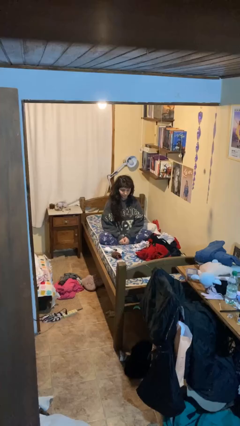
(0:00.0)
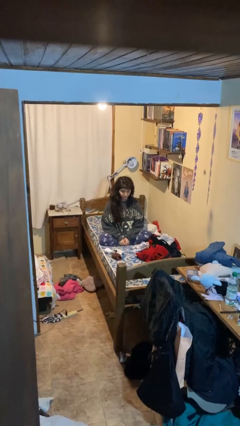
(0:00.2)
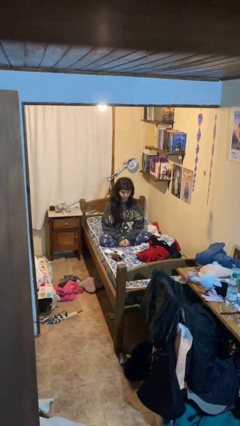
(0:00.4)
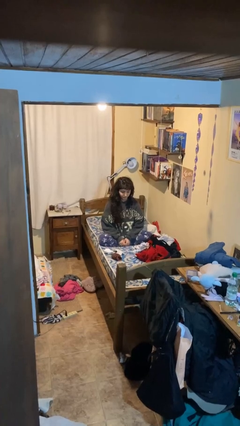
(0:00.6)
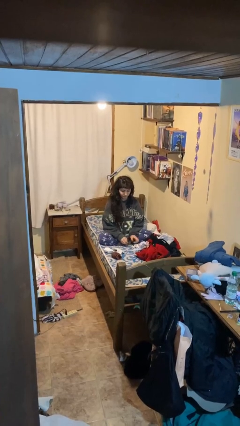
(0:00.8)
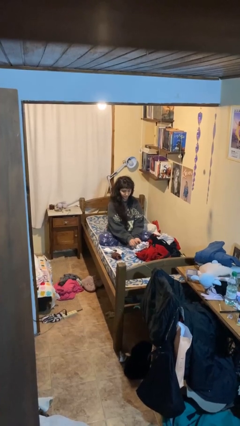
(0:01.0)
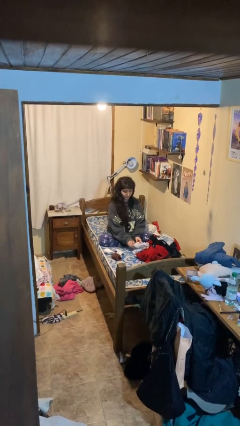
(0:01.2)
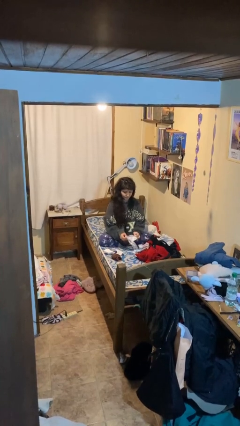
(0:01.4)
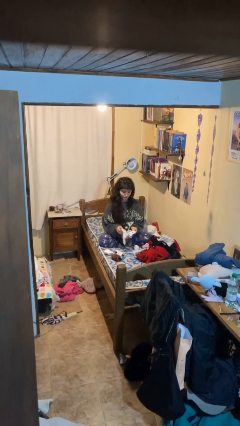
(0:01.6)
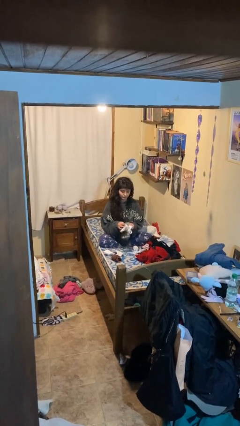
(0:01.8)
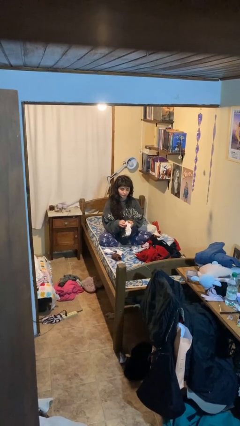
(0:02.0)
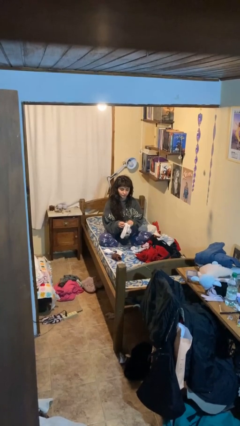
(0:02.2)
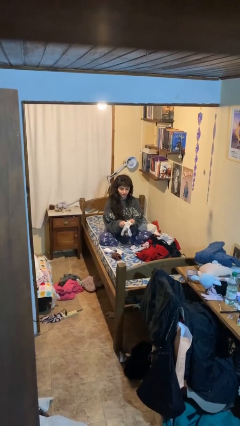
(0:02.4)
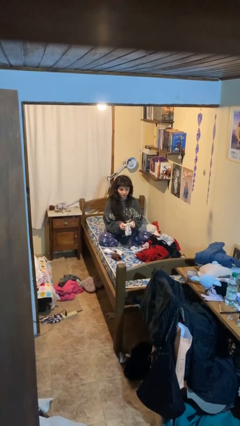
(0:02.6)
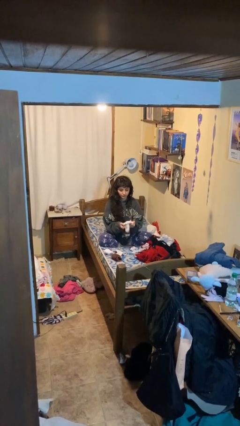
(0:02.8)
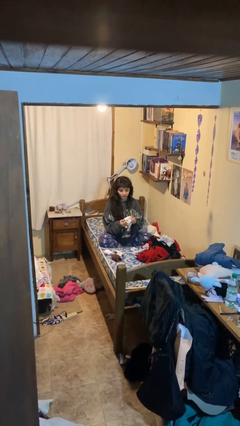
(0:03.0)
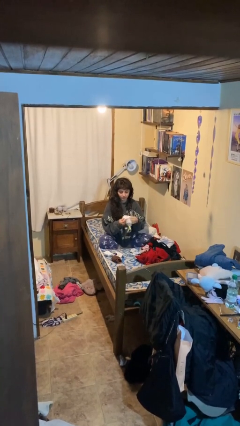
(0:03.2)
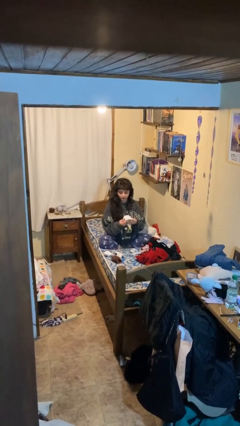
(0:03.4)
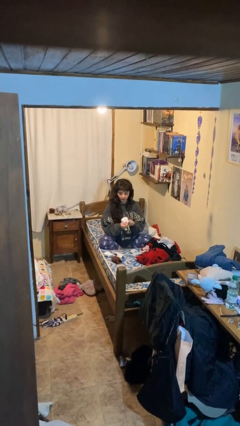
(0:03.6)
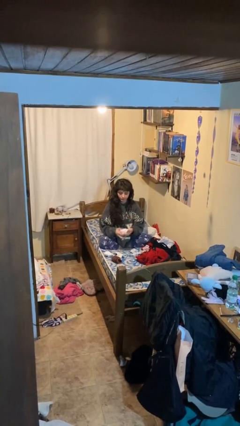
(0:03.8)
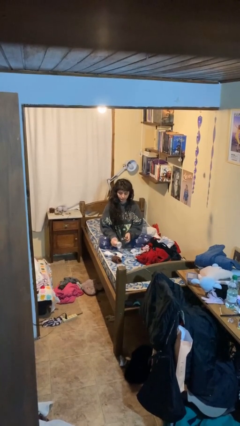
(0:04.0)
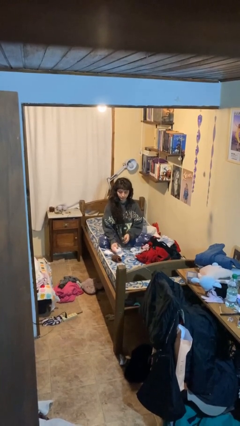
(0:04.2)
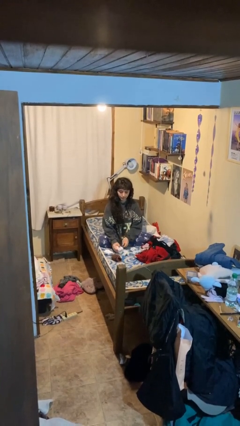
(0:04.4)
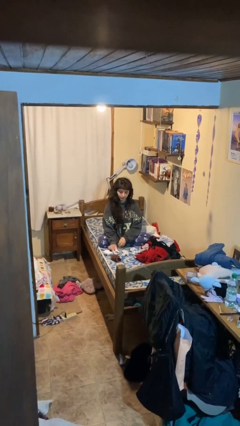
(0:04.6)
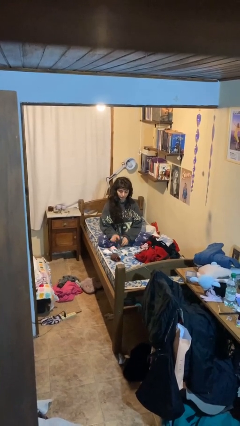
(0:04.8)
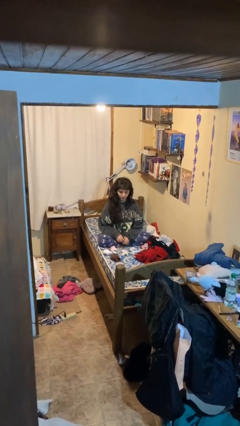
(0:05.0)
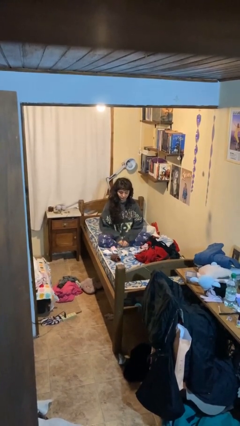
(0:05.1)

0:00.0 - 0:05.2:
person folds socks

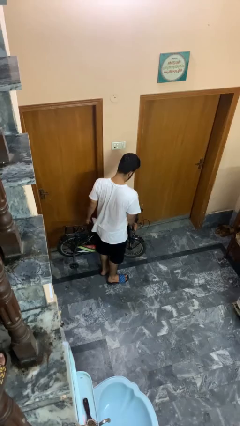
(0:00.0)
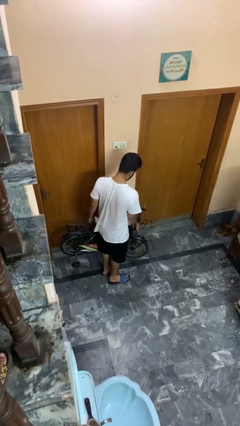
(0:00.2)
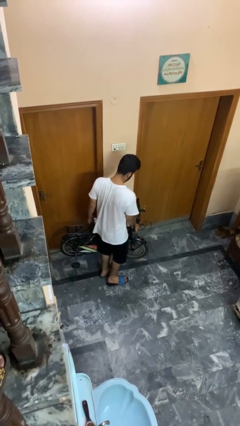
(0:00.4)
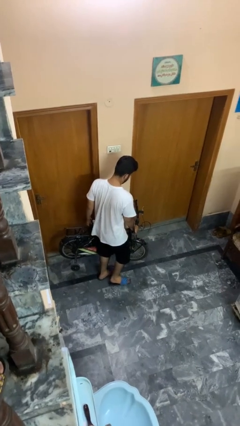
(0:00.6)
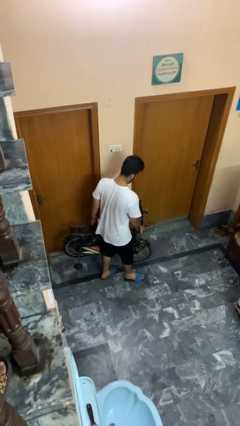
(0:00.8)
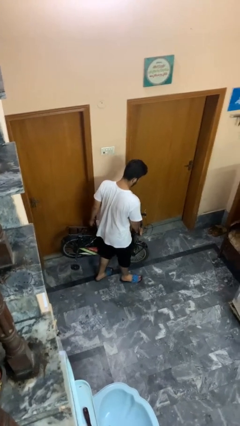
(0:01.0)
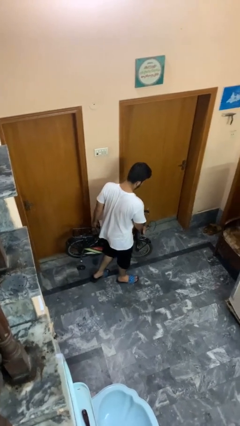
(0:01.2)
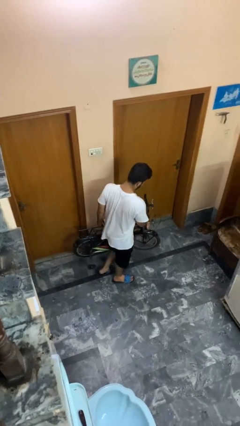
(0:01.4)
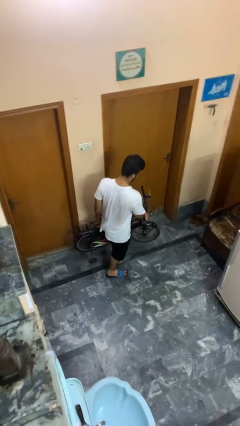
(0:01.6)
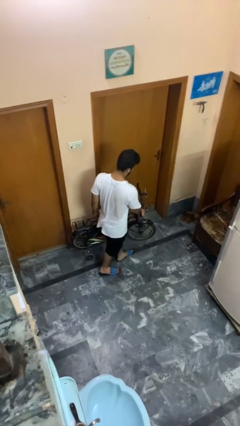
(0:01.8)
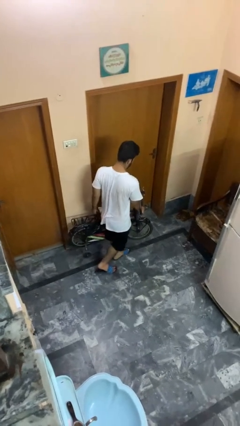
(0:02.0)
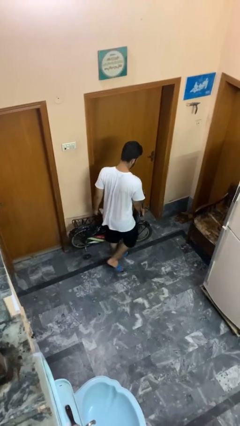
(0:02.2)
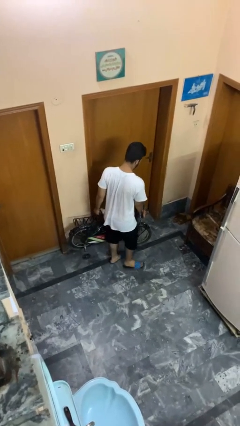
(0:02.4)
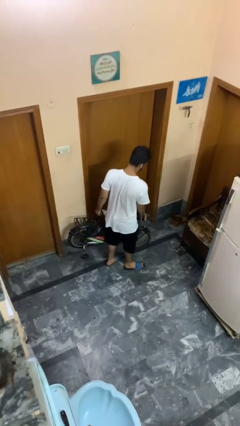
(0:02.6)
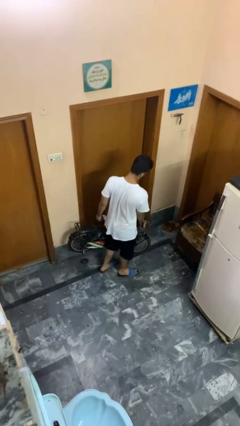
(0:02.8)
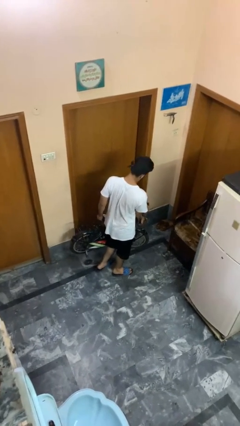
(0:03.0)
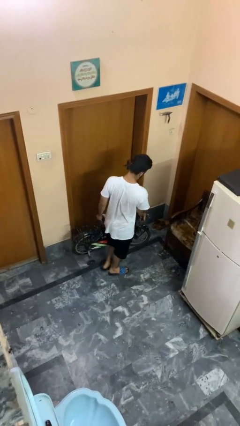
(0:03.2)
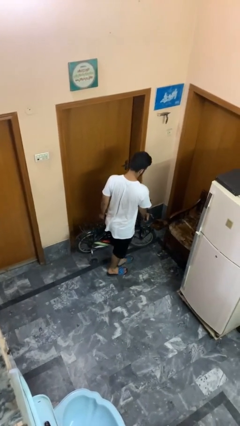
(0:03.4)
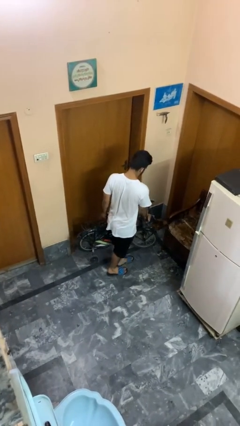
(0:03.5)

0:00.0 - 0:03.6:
person carries bicycle

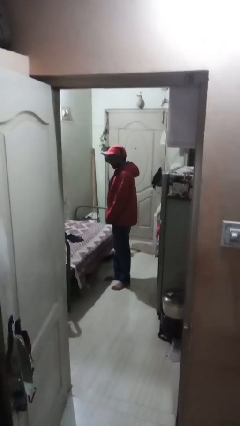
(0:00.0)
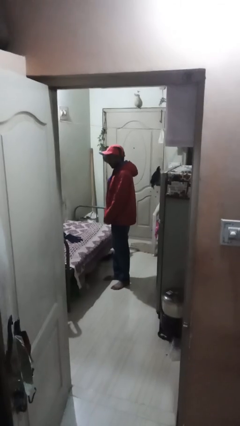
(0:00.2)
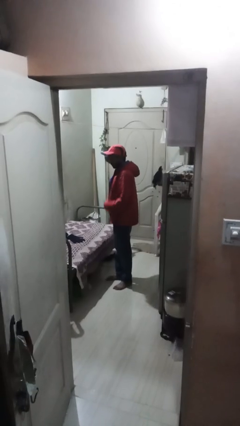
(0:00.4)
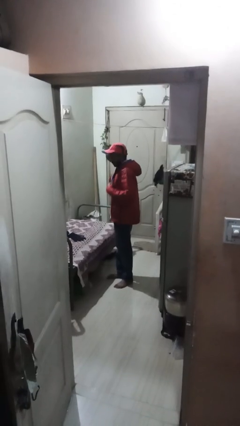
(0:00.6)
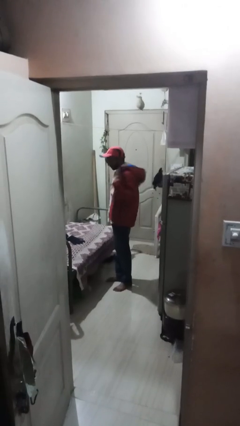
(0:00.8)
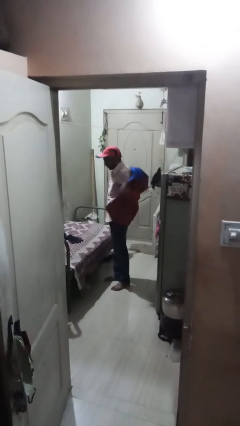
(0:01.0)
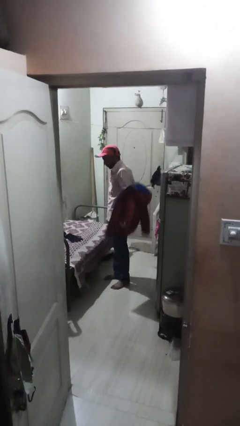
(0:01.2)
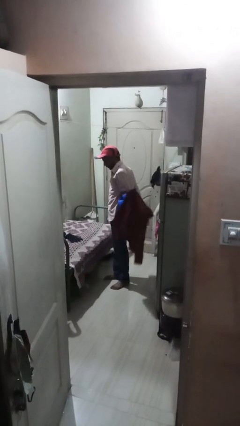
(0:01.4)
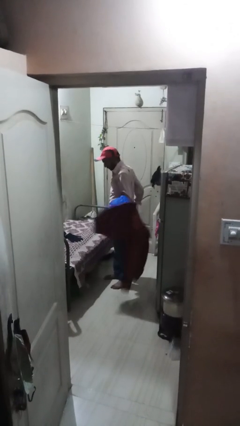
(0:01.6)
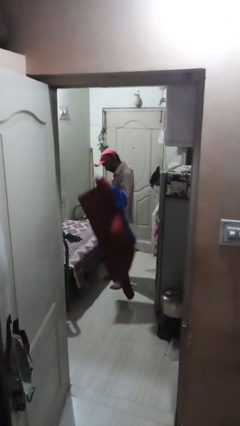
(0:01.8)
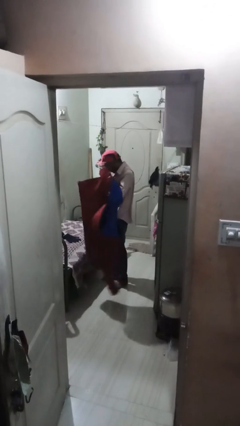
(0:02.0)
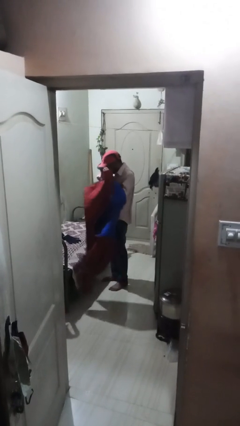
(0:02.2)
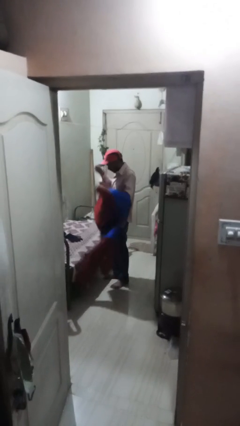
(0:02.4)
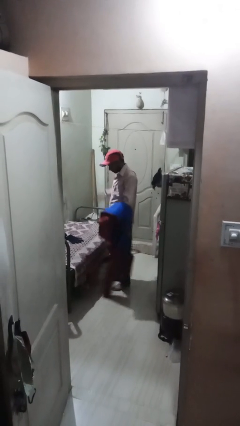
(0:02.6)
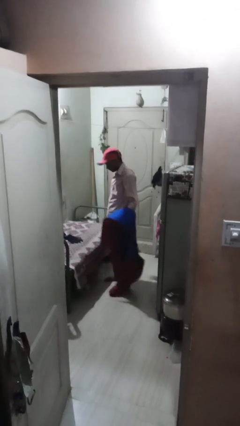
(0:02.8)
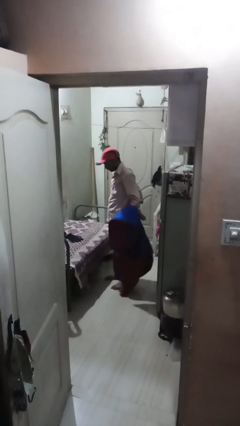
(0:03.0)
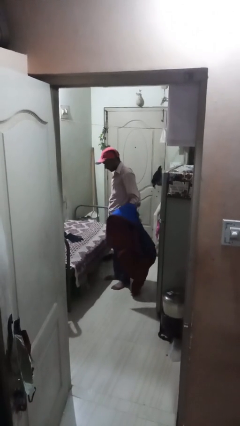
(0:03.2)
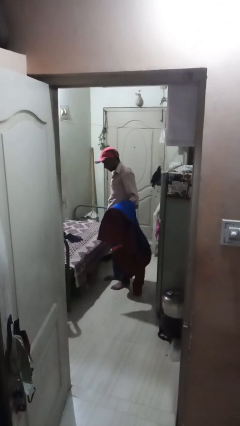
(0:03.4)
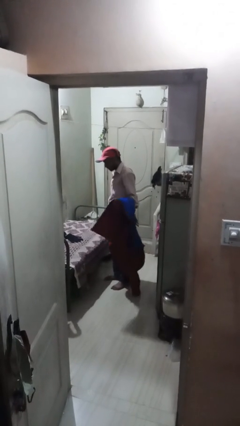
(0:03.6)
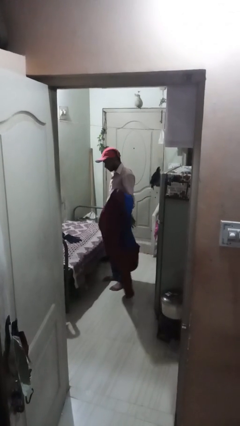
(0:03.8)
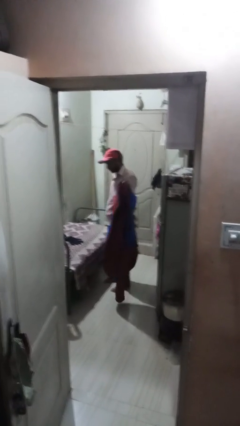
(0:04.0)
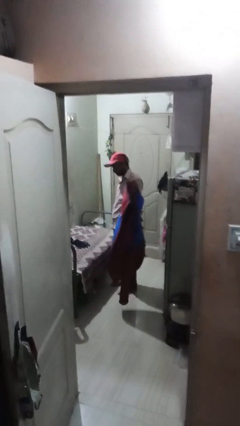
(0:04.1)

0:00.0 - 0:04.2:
person takes off jacket

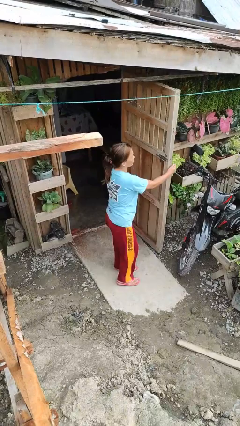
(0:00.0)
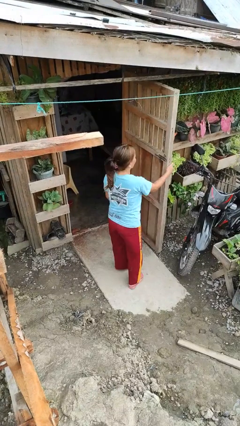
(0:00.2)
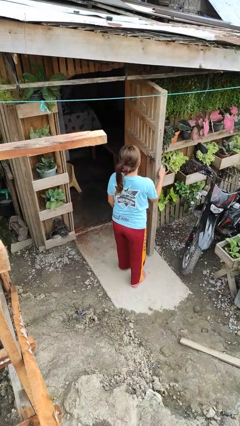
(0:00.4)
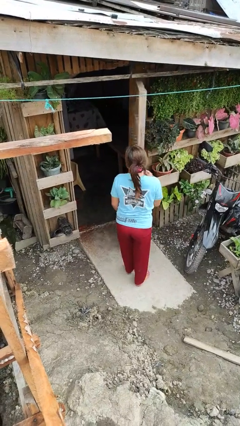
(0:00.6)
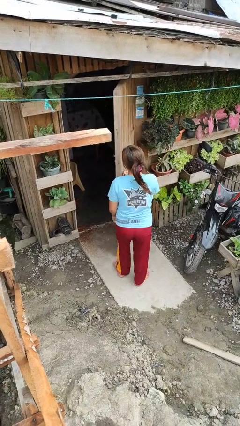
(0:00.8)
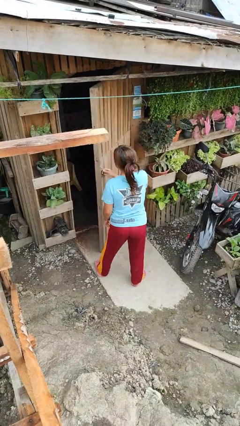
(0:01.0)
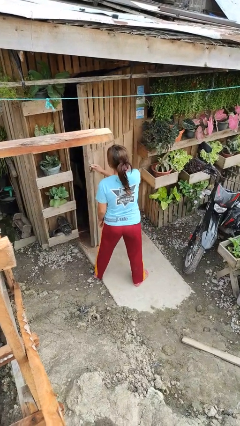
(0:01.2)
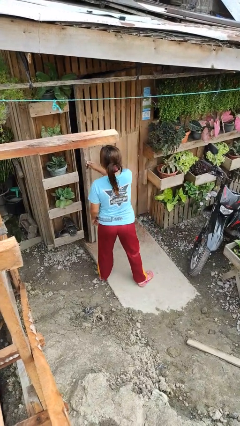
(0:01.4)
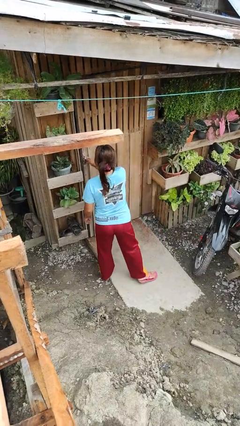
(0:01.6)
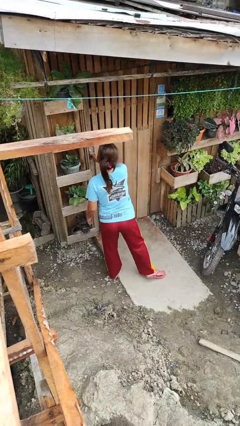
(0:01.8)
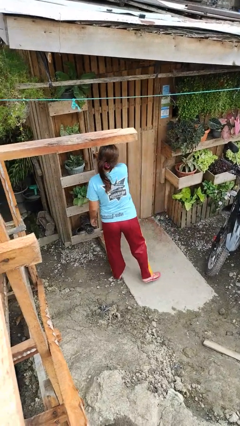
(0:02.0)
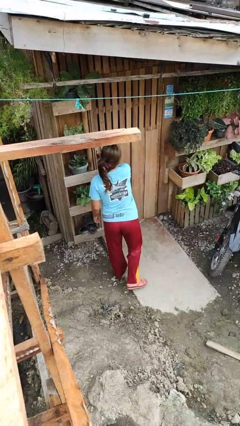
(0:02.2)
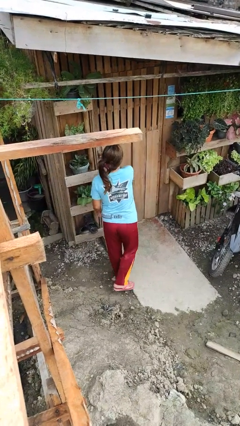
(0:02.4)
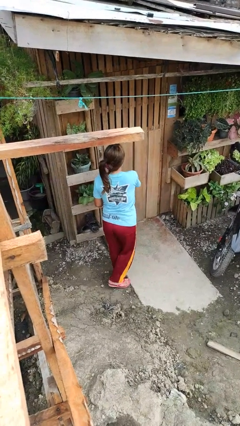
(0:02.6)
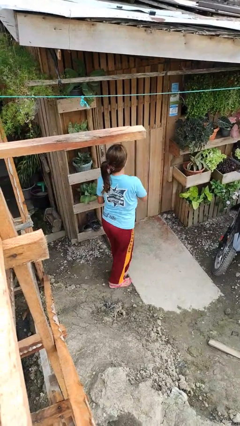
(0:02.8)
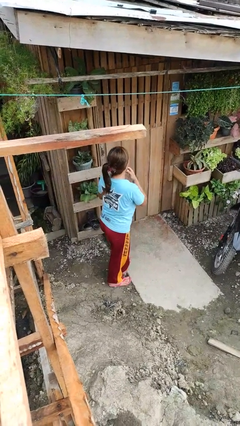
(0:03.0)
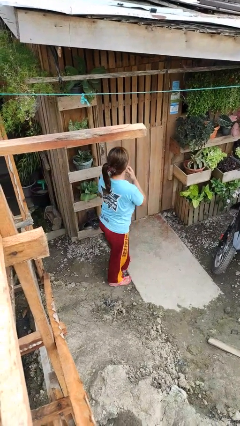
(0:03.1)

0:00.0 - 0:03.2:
person closes facility door

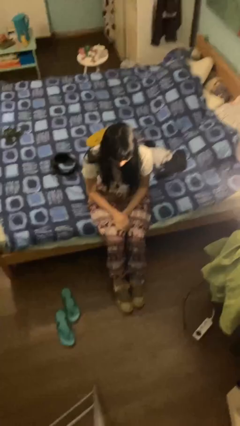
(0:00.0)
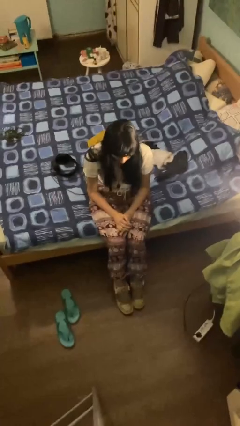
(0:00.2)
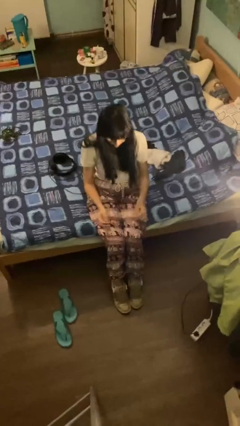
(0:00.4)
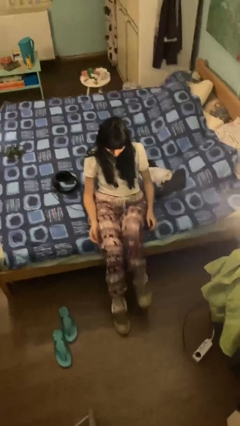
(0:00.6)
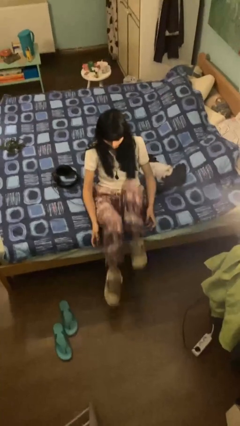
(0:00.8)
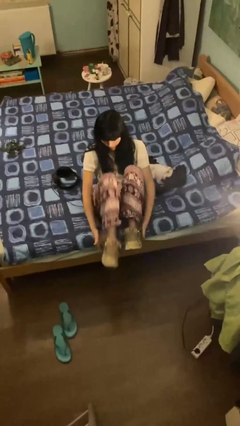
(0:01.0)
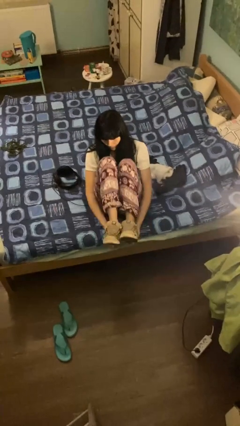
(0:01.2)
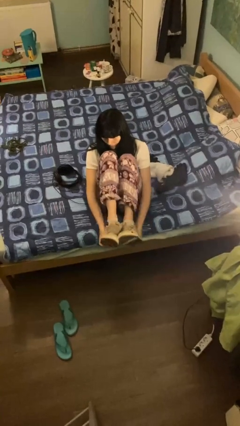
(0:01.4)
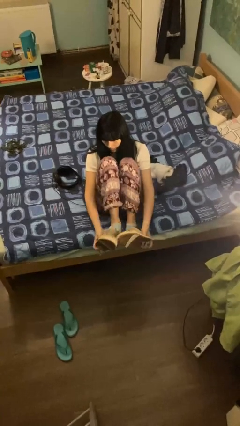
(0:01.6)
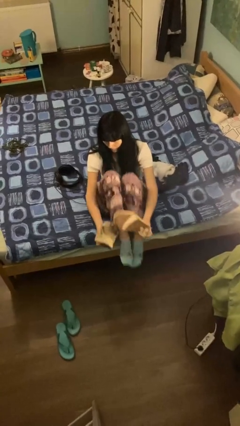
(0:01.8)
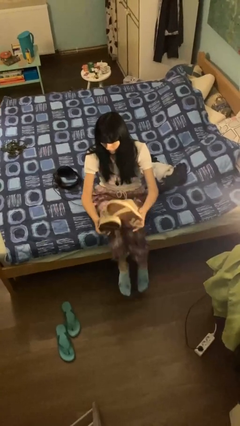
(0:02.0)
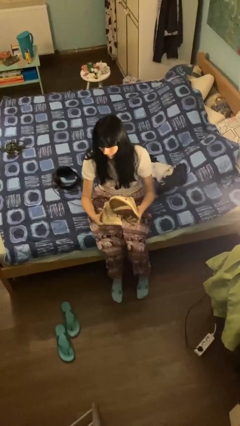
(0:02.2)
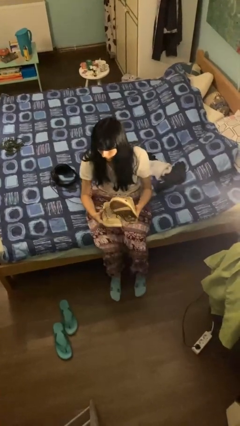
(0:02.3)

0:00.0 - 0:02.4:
person takes off shoes
